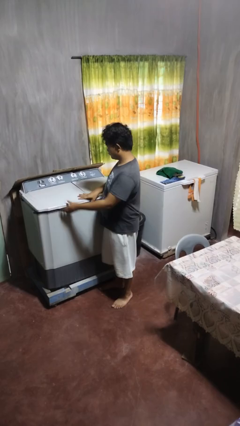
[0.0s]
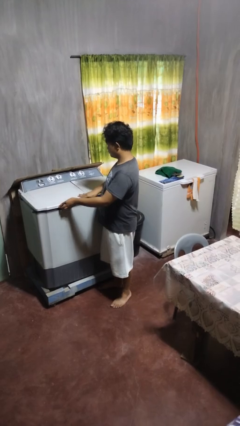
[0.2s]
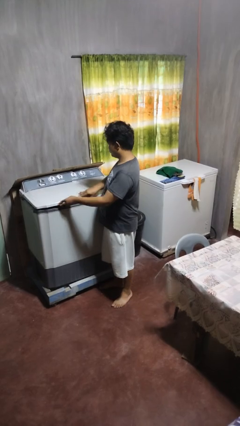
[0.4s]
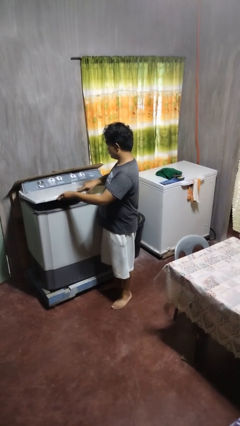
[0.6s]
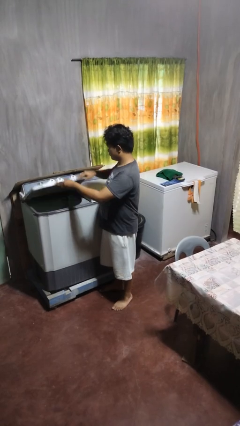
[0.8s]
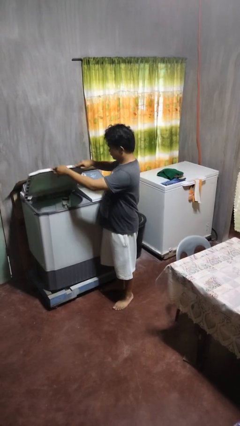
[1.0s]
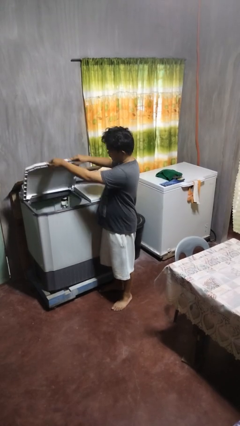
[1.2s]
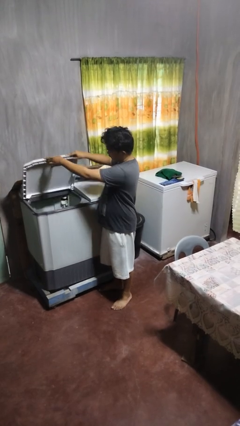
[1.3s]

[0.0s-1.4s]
person opens clothes washer

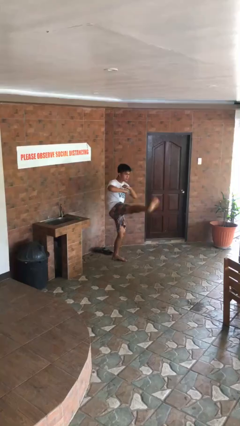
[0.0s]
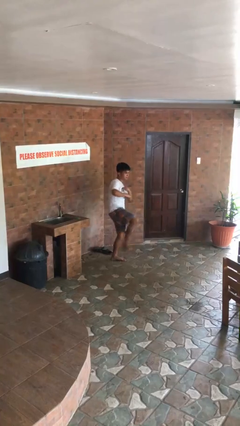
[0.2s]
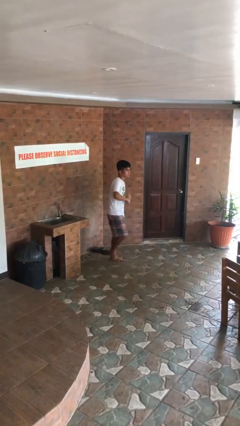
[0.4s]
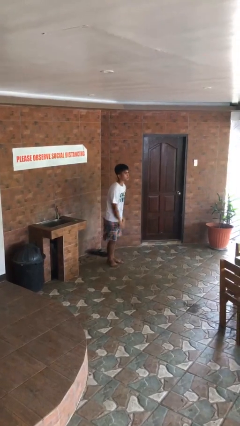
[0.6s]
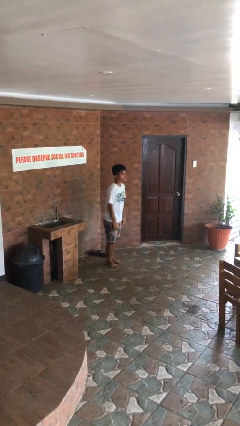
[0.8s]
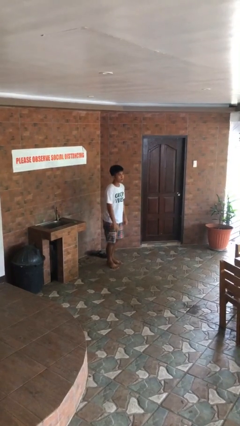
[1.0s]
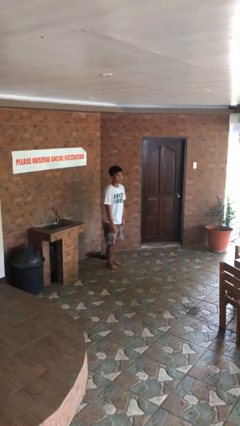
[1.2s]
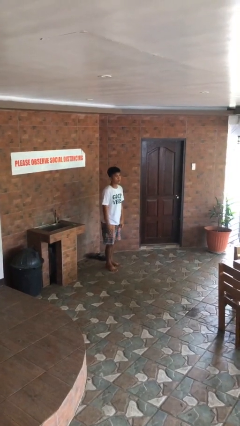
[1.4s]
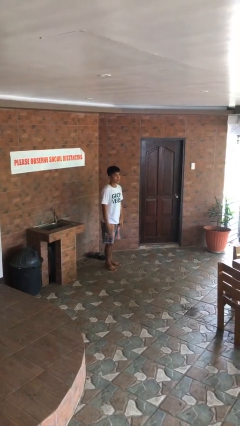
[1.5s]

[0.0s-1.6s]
person karate kicks

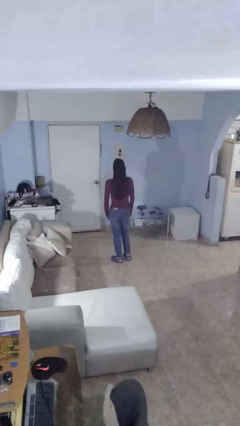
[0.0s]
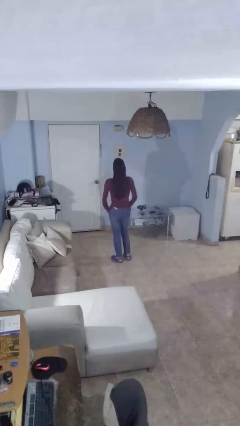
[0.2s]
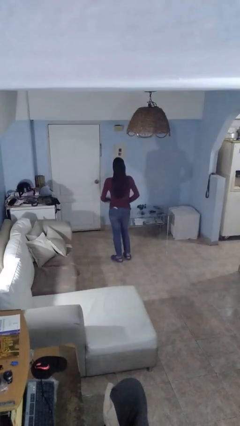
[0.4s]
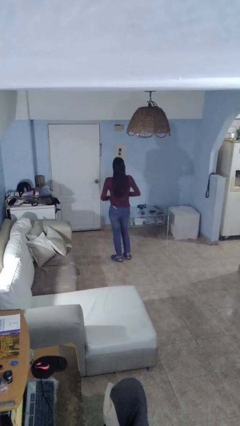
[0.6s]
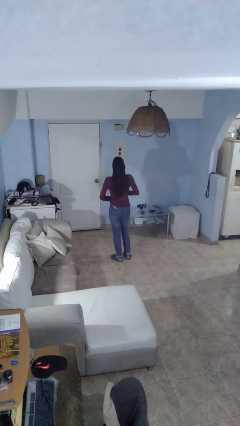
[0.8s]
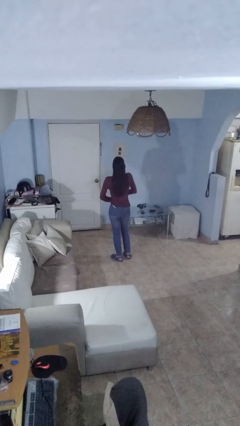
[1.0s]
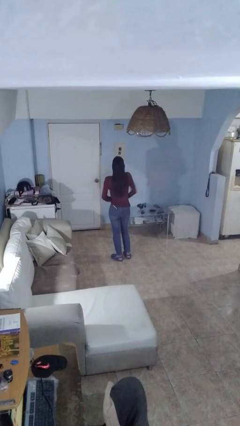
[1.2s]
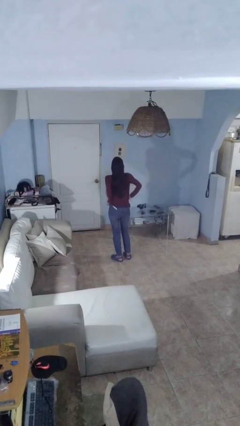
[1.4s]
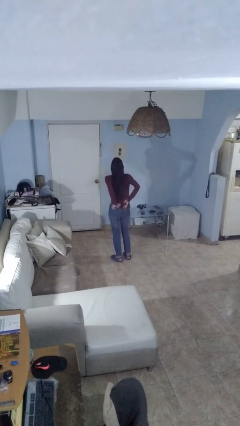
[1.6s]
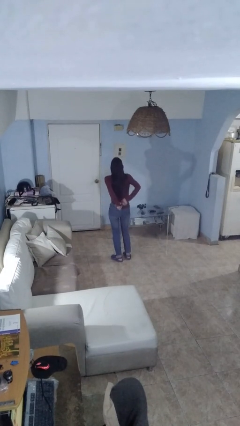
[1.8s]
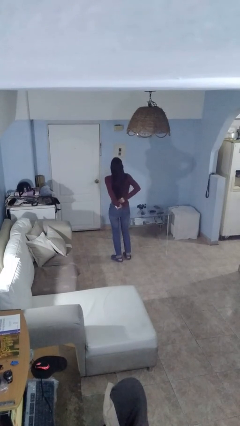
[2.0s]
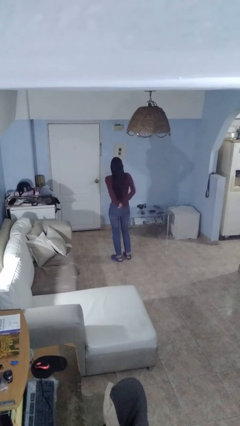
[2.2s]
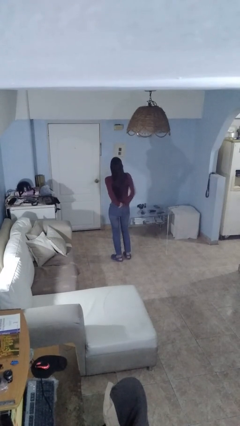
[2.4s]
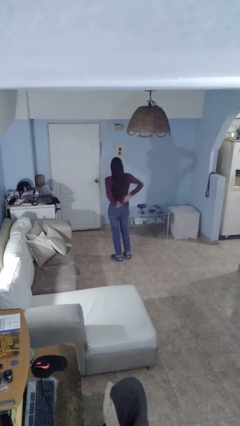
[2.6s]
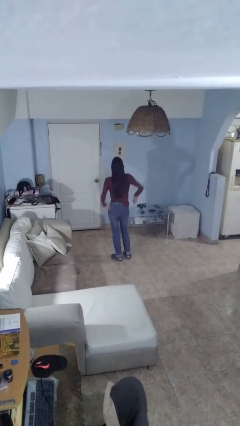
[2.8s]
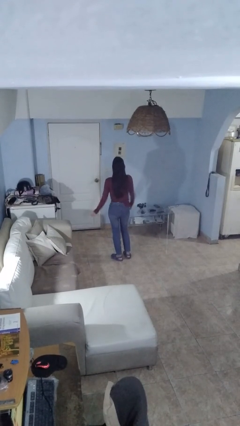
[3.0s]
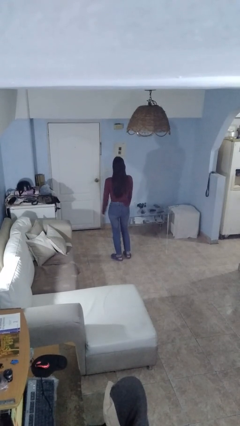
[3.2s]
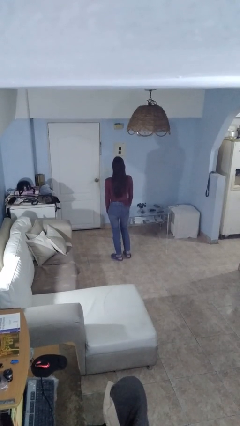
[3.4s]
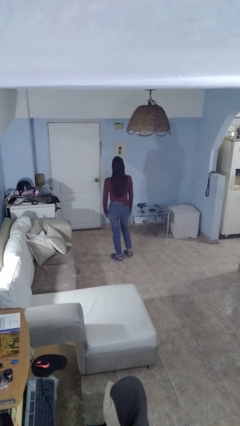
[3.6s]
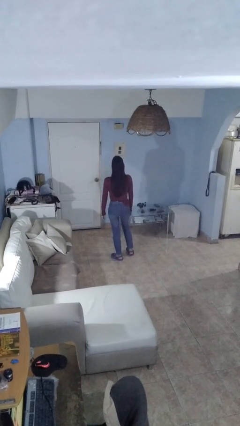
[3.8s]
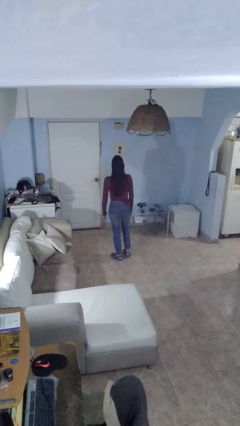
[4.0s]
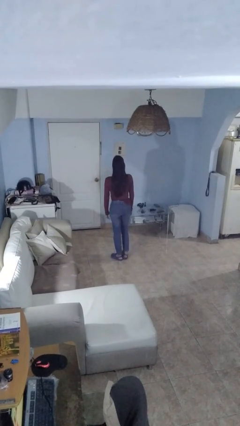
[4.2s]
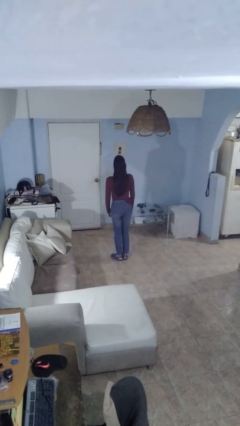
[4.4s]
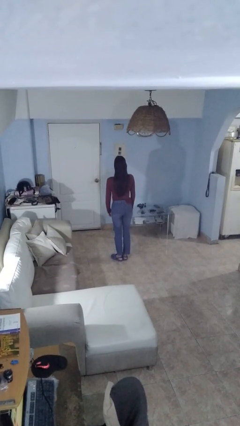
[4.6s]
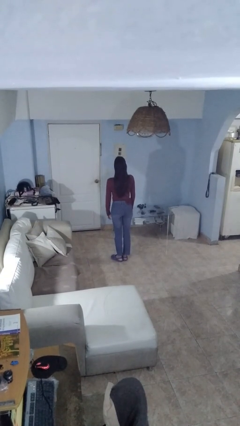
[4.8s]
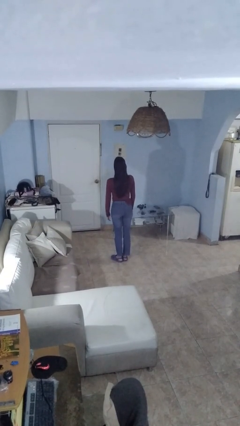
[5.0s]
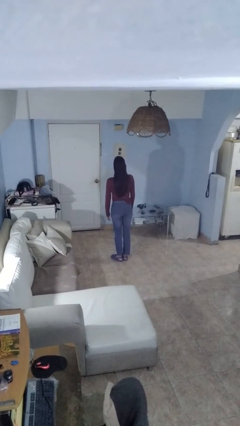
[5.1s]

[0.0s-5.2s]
person tucks in shirt

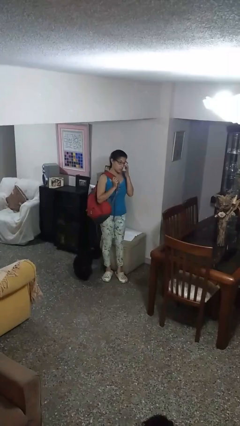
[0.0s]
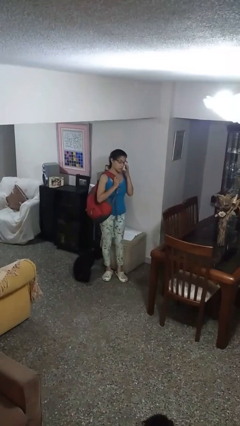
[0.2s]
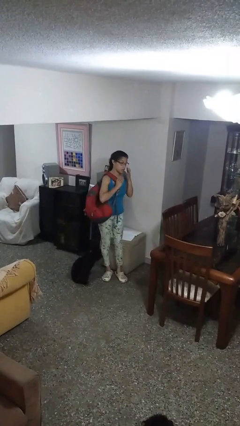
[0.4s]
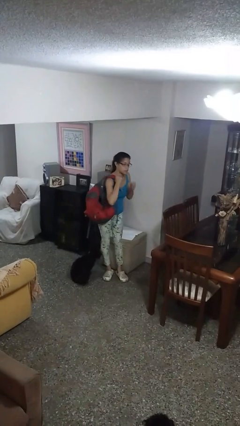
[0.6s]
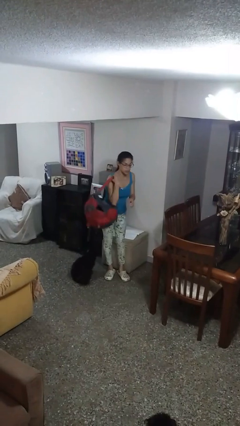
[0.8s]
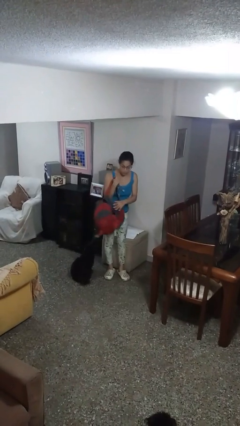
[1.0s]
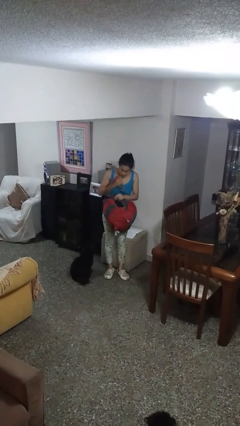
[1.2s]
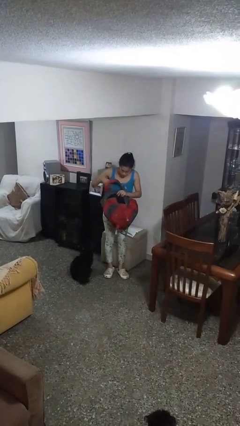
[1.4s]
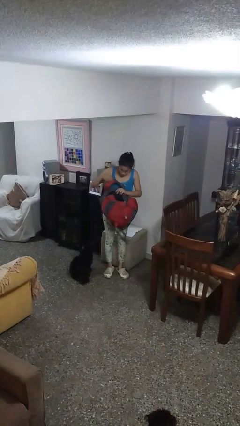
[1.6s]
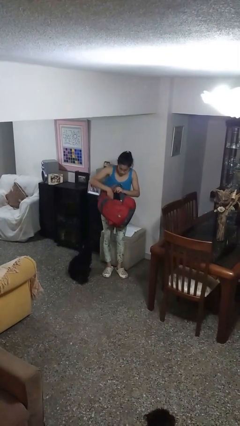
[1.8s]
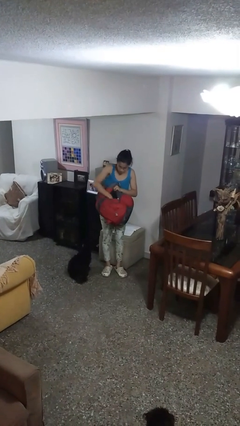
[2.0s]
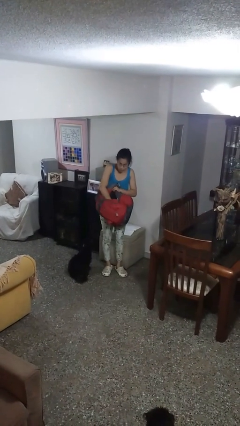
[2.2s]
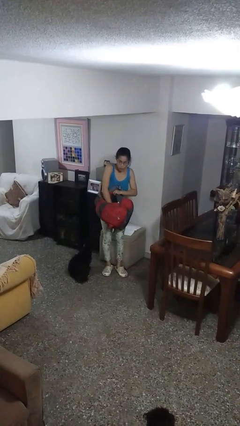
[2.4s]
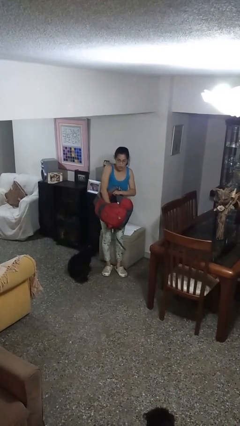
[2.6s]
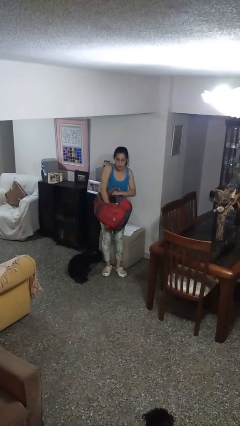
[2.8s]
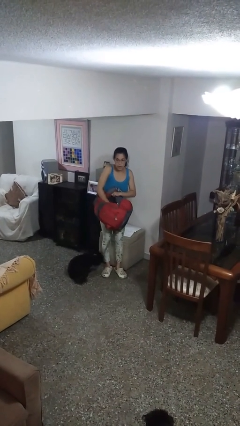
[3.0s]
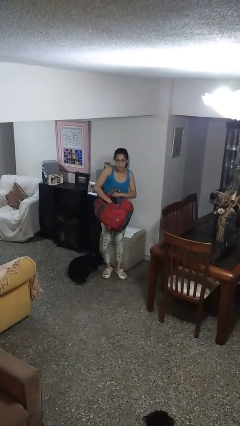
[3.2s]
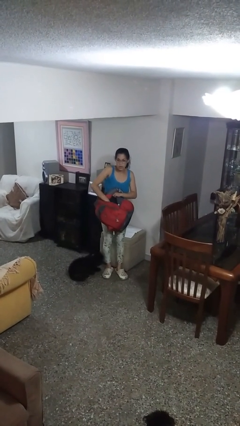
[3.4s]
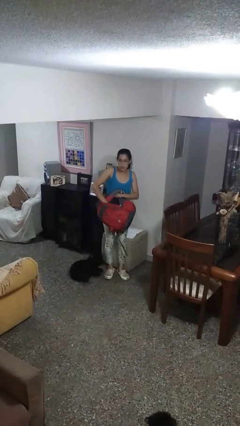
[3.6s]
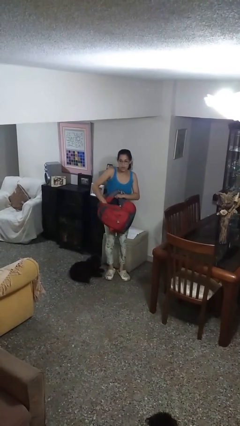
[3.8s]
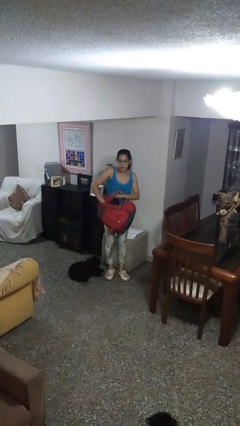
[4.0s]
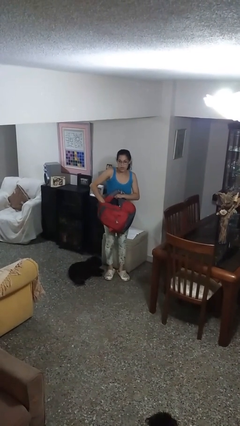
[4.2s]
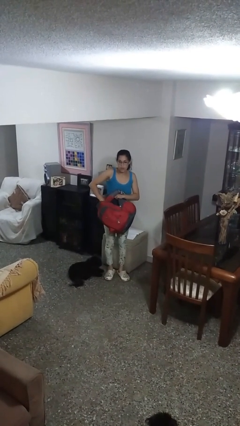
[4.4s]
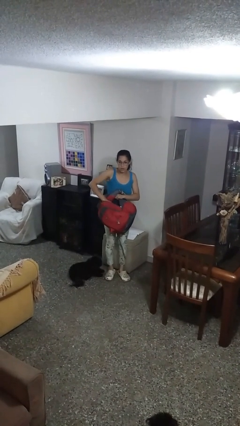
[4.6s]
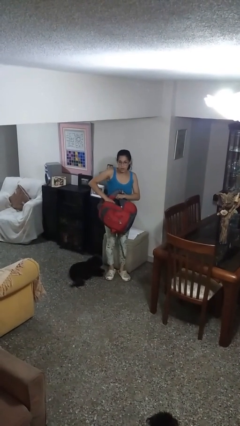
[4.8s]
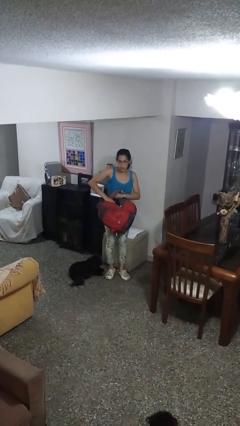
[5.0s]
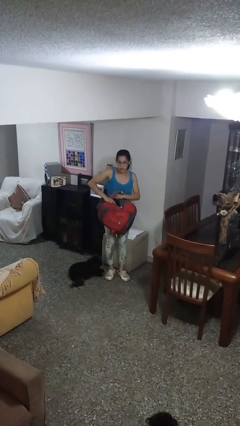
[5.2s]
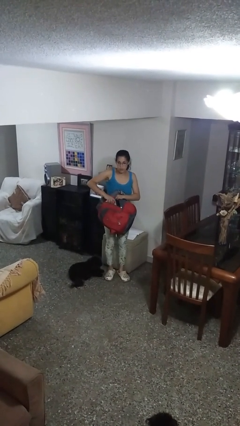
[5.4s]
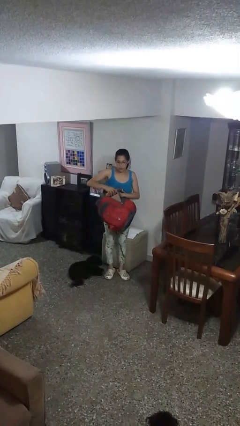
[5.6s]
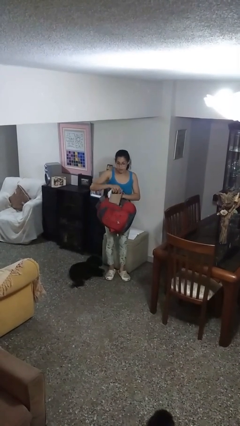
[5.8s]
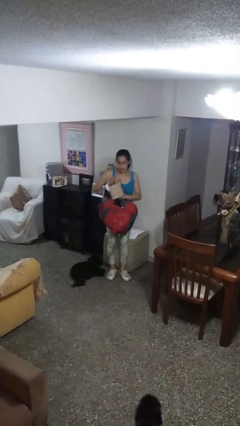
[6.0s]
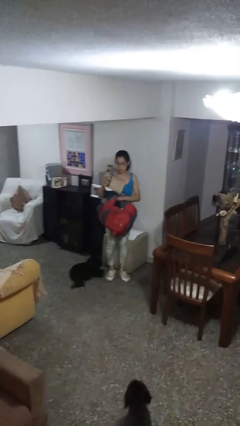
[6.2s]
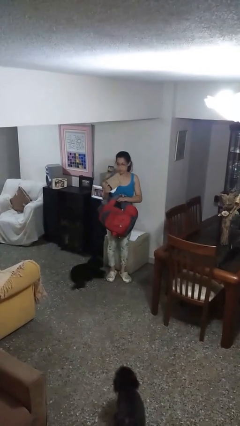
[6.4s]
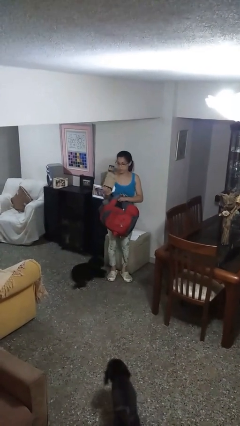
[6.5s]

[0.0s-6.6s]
person searches in backpack

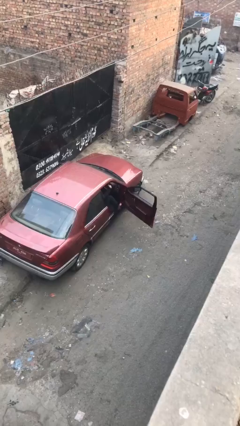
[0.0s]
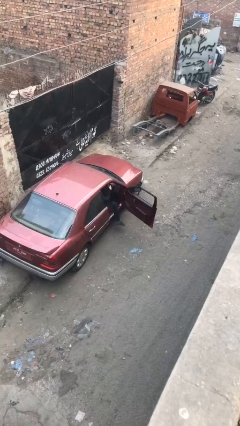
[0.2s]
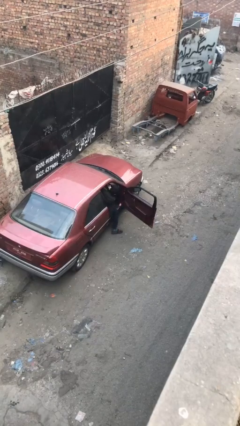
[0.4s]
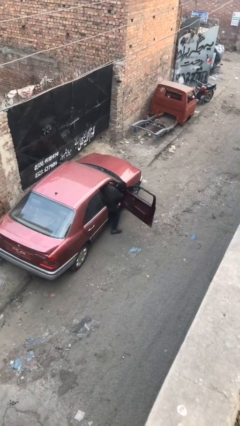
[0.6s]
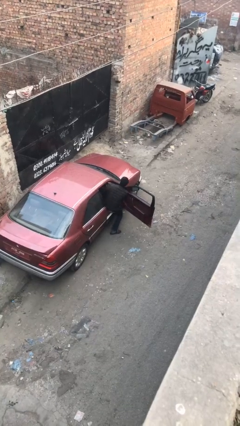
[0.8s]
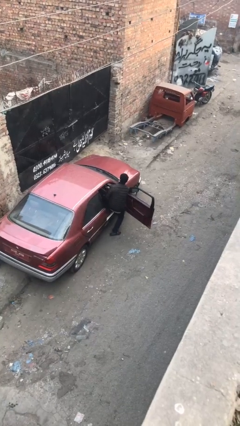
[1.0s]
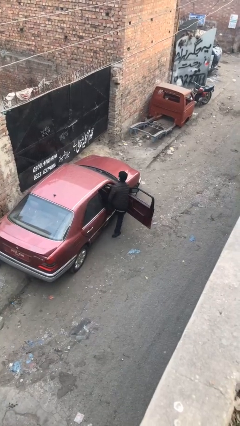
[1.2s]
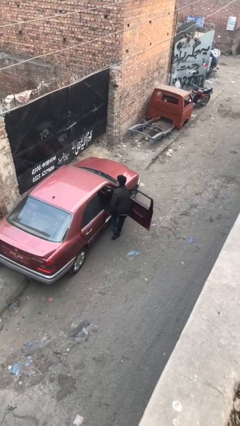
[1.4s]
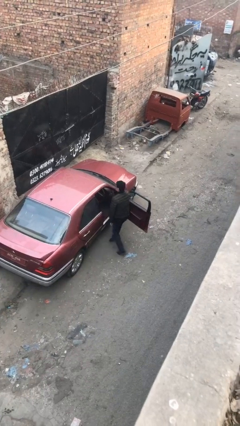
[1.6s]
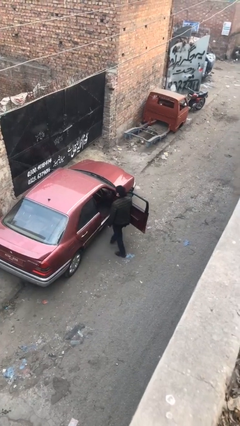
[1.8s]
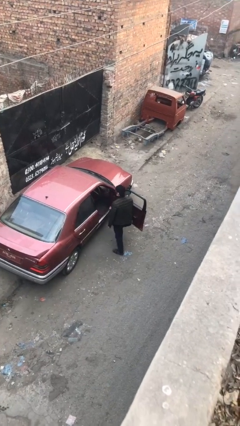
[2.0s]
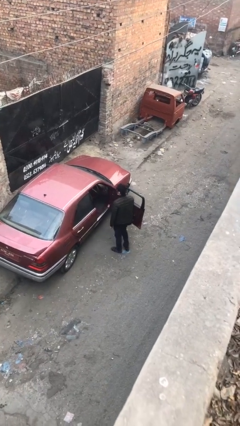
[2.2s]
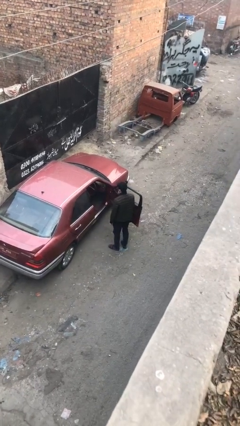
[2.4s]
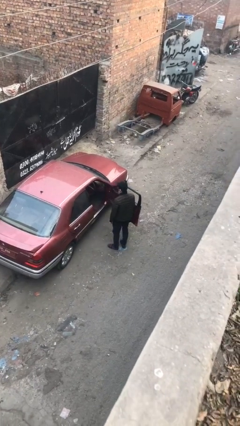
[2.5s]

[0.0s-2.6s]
person exits car
